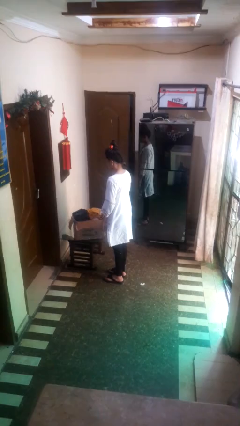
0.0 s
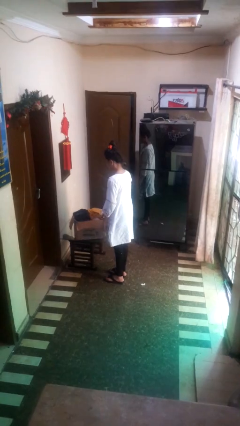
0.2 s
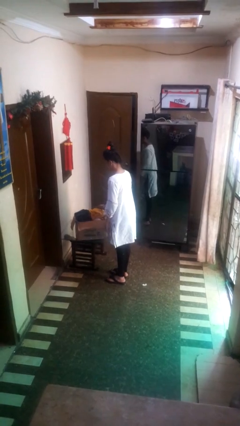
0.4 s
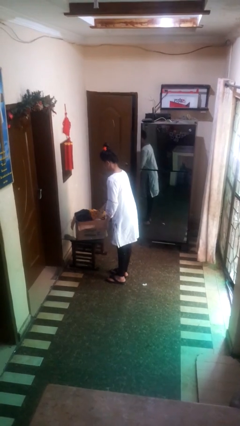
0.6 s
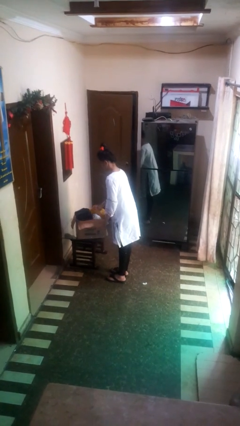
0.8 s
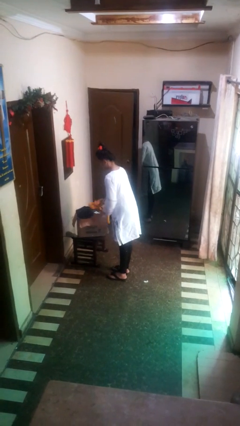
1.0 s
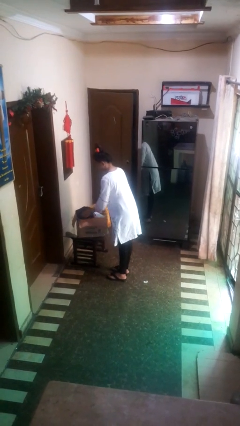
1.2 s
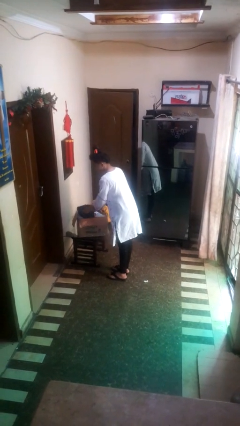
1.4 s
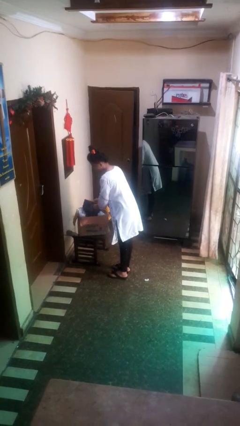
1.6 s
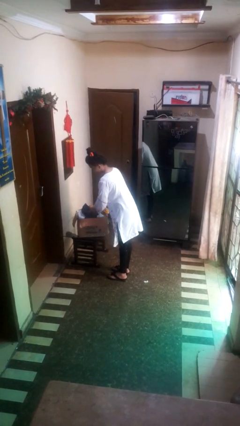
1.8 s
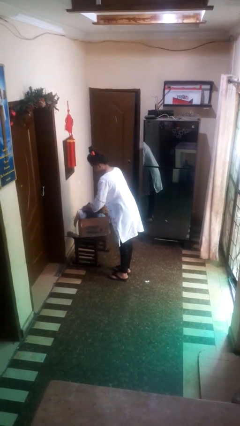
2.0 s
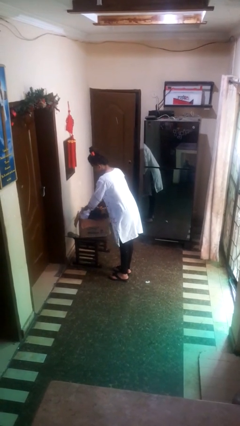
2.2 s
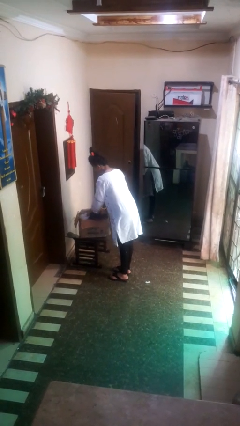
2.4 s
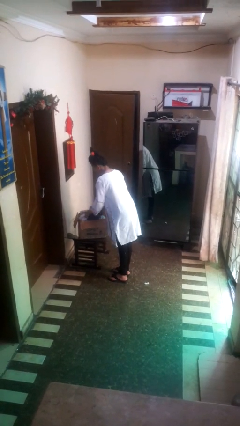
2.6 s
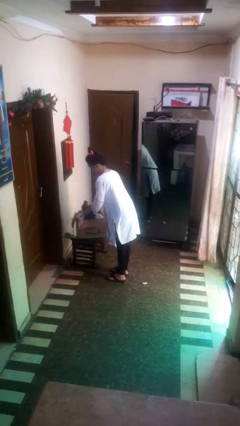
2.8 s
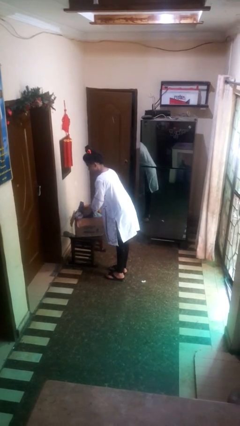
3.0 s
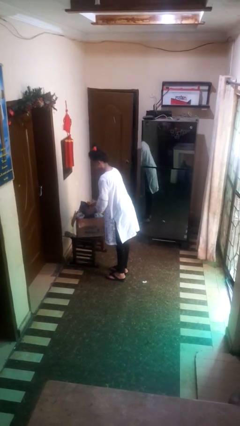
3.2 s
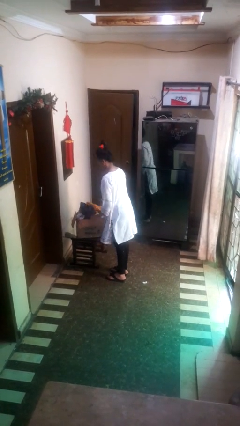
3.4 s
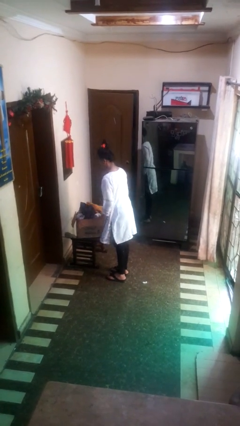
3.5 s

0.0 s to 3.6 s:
person searches in box

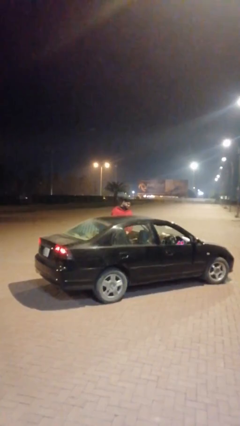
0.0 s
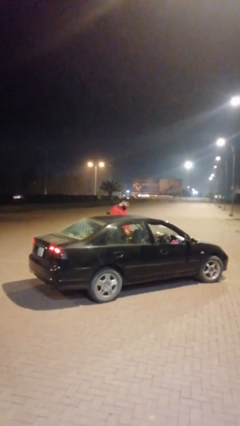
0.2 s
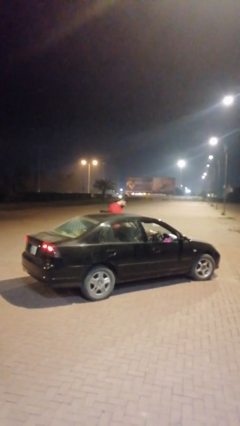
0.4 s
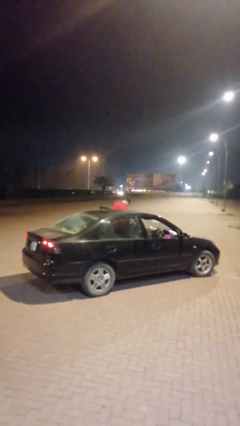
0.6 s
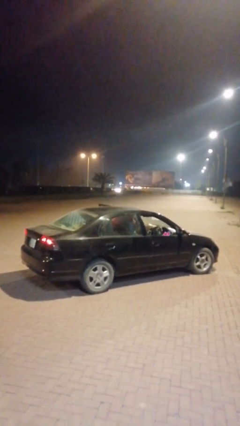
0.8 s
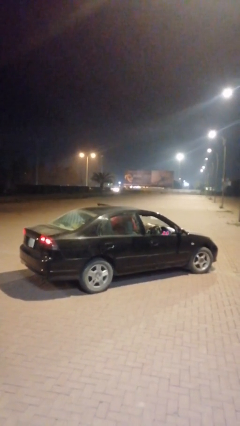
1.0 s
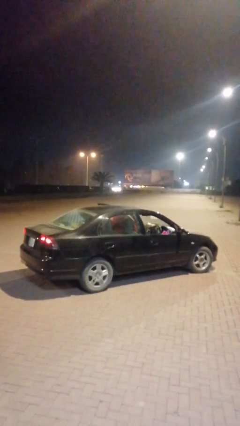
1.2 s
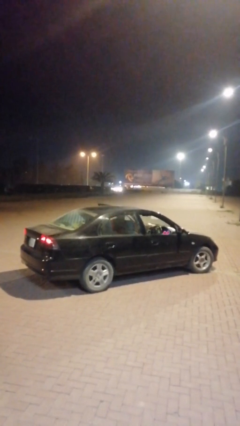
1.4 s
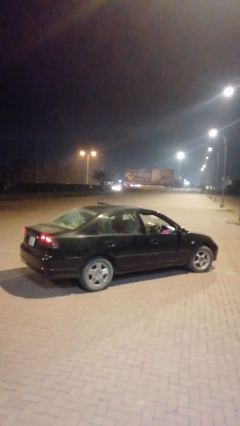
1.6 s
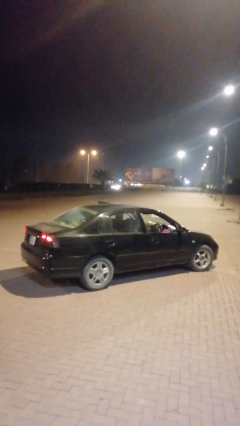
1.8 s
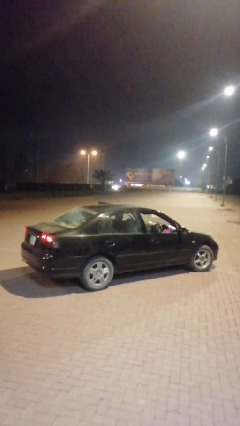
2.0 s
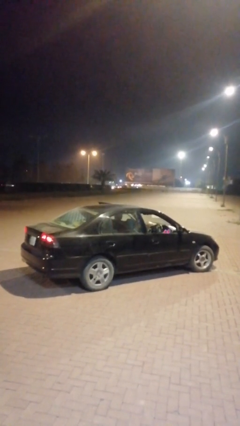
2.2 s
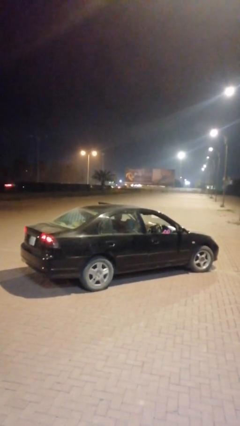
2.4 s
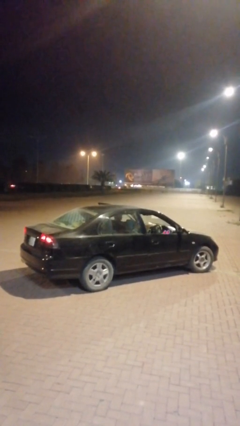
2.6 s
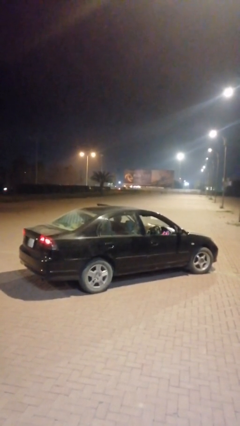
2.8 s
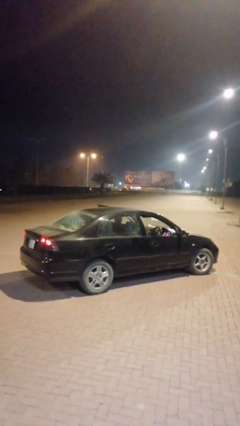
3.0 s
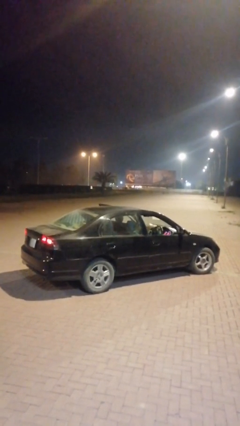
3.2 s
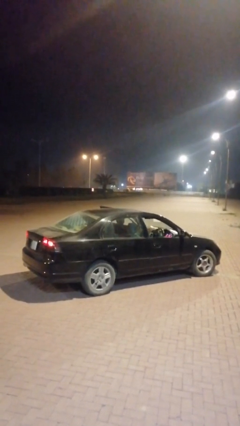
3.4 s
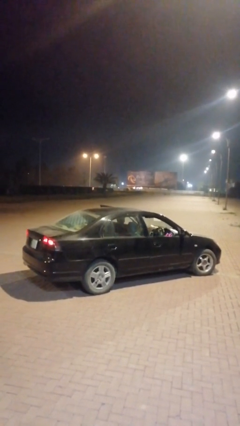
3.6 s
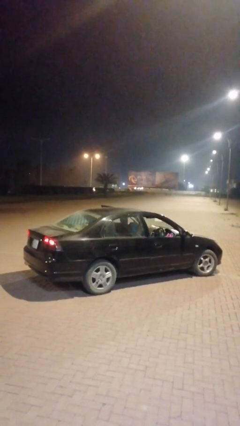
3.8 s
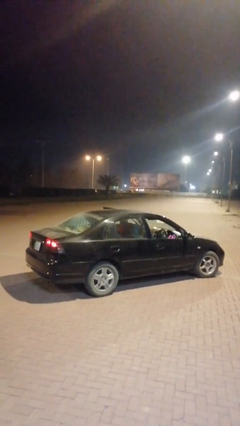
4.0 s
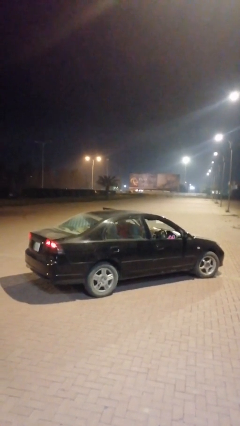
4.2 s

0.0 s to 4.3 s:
person enters car

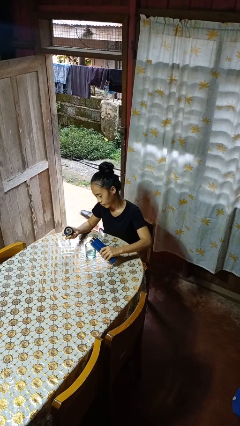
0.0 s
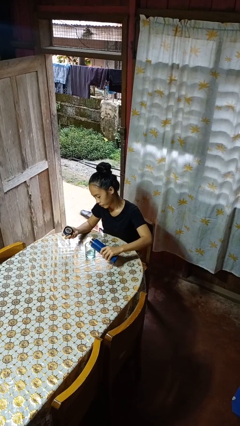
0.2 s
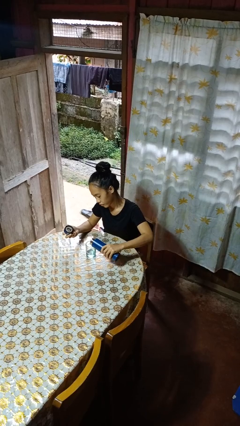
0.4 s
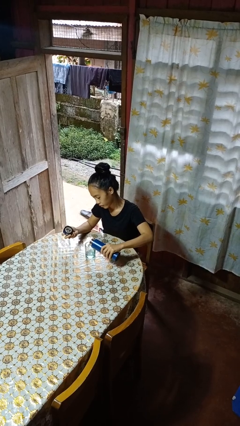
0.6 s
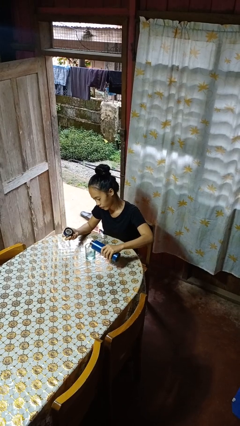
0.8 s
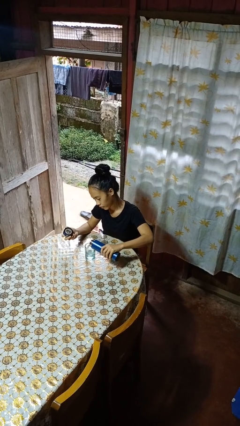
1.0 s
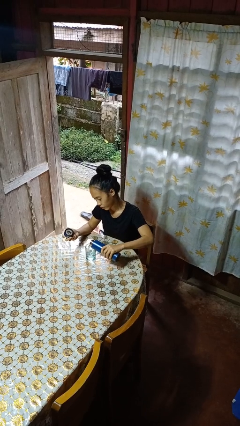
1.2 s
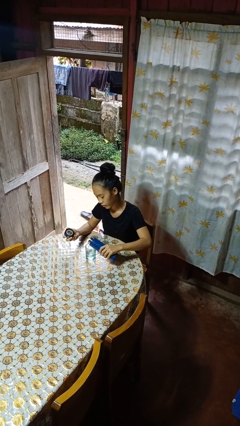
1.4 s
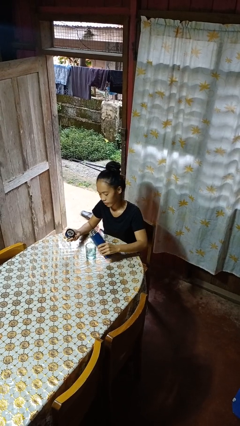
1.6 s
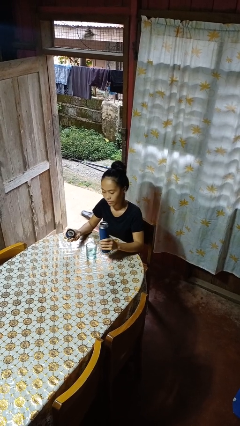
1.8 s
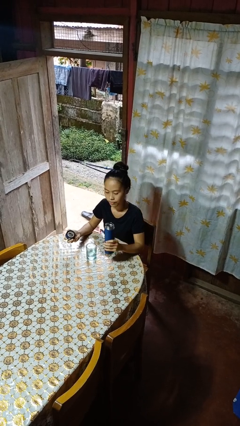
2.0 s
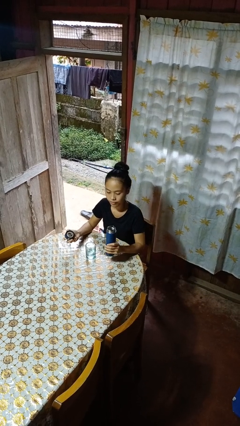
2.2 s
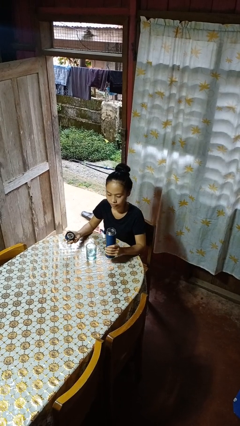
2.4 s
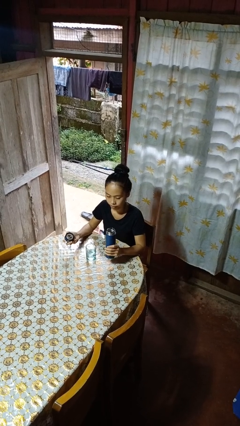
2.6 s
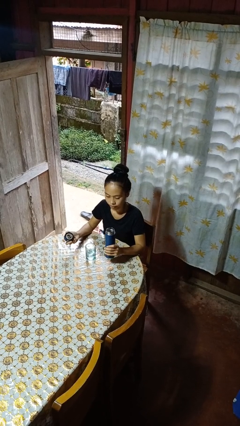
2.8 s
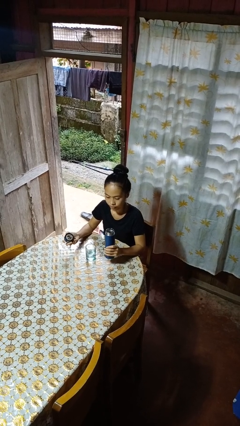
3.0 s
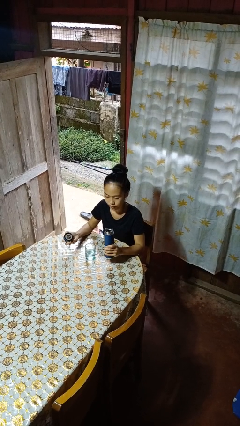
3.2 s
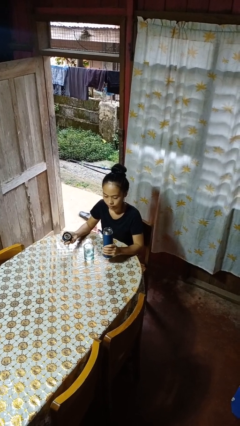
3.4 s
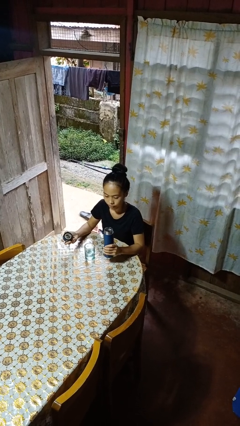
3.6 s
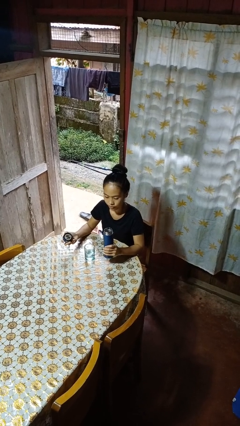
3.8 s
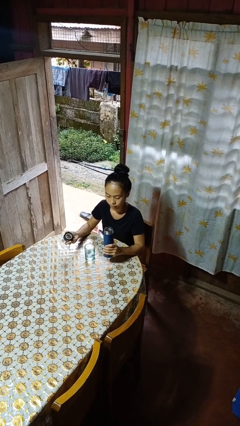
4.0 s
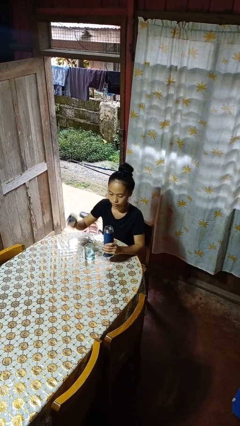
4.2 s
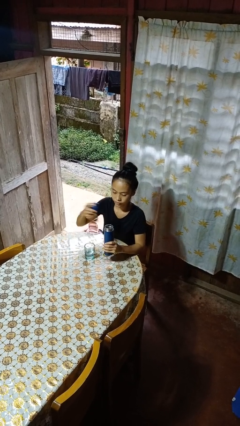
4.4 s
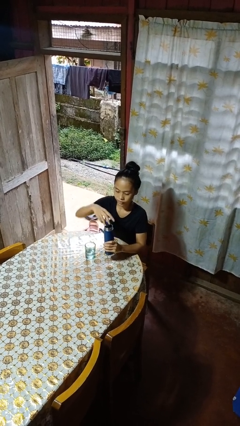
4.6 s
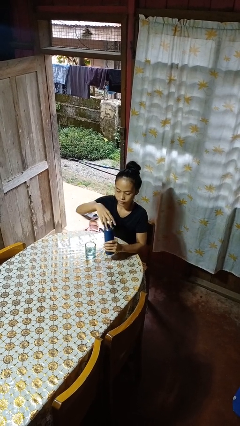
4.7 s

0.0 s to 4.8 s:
person pours liquid into cup

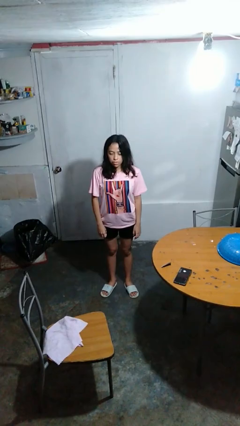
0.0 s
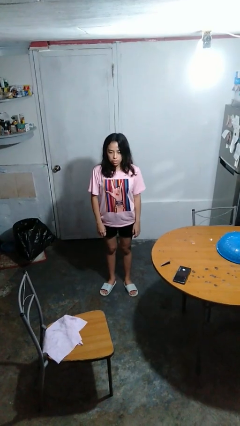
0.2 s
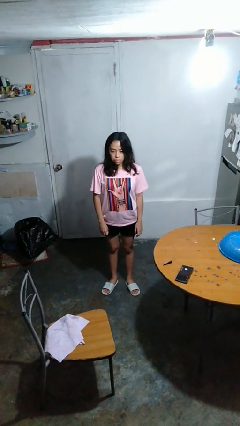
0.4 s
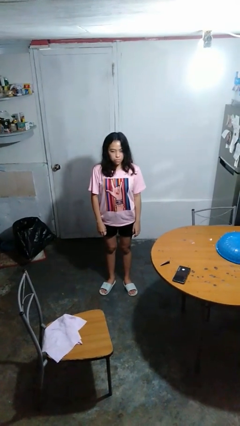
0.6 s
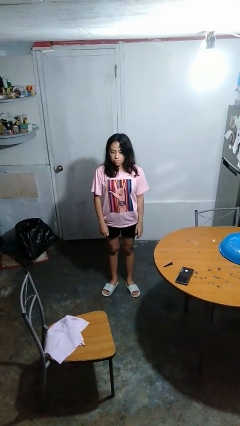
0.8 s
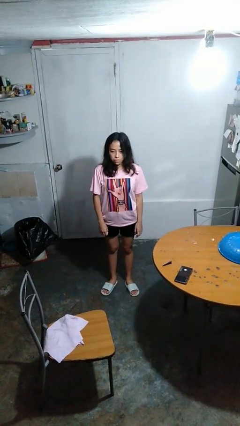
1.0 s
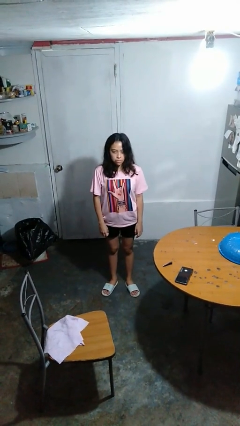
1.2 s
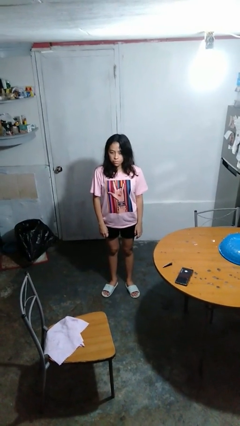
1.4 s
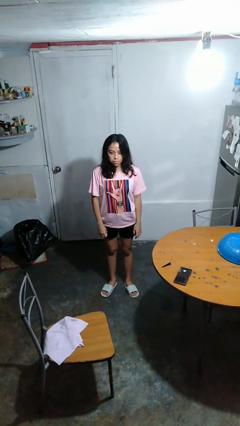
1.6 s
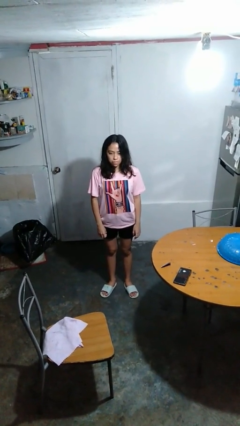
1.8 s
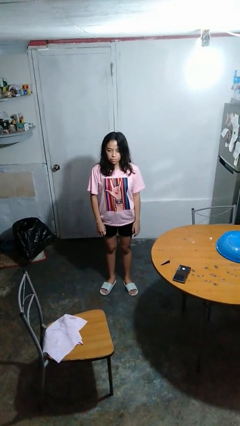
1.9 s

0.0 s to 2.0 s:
person shakes head

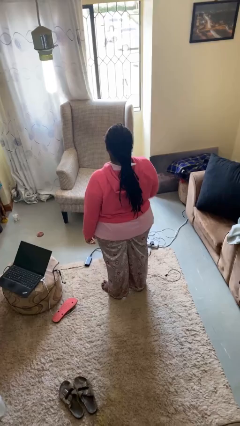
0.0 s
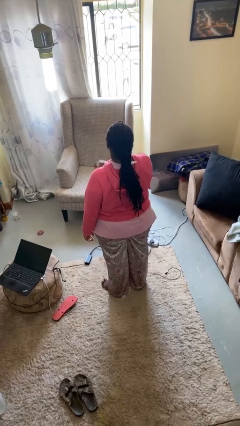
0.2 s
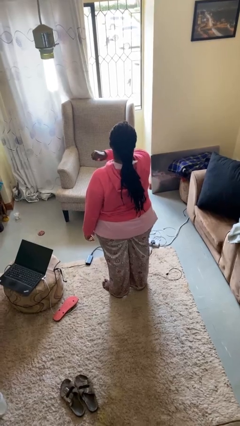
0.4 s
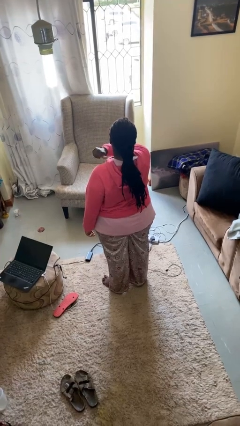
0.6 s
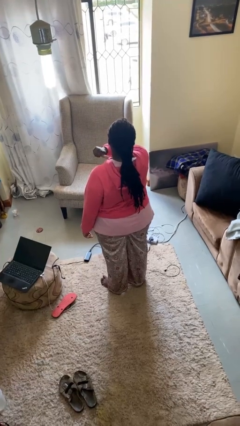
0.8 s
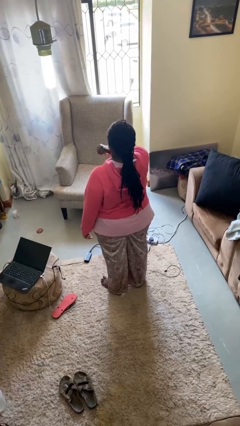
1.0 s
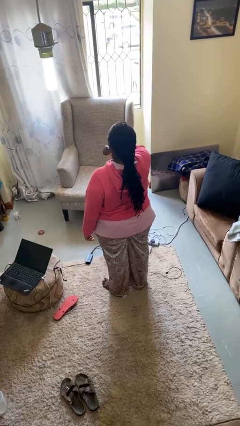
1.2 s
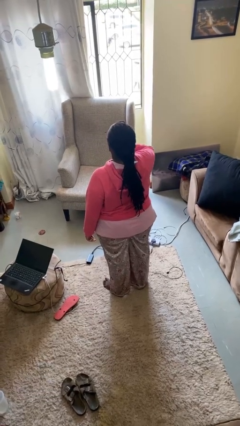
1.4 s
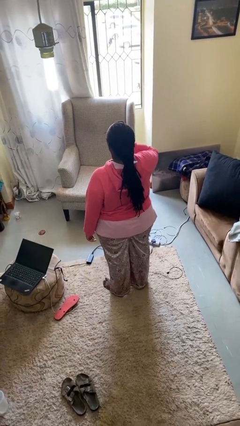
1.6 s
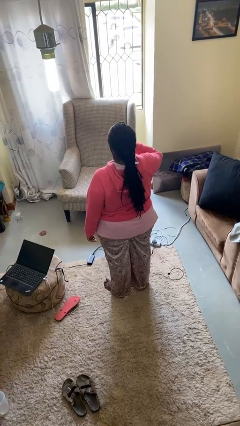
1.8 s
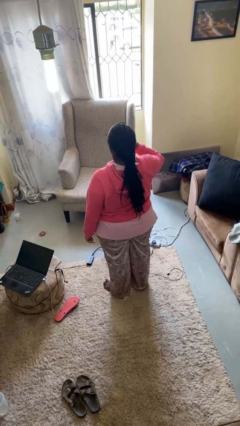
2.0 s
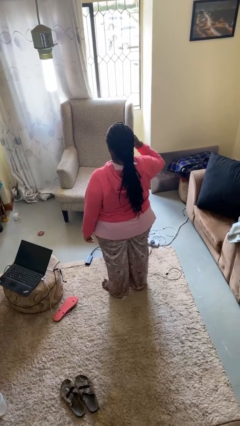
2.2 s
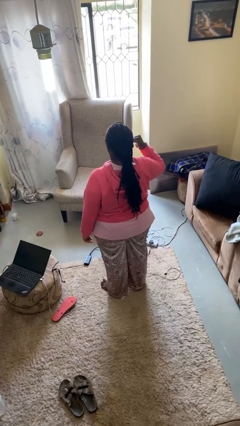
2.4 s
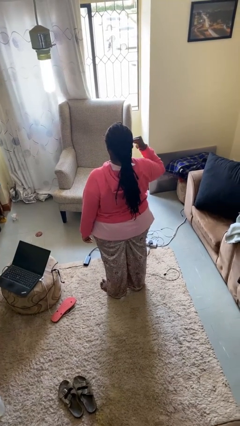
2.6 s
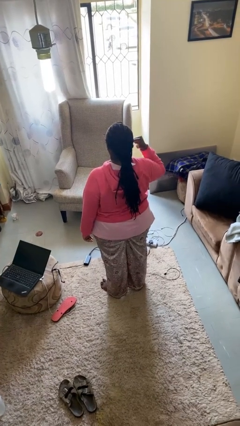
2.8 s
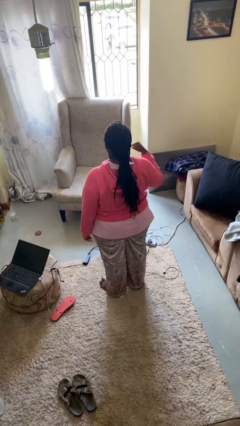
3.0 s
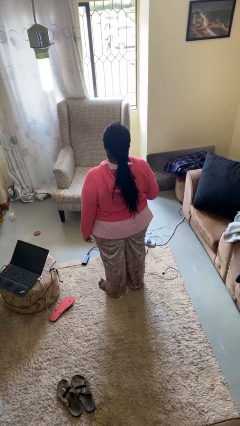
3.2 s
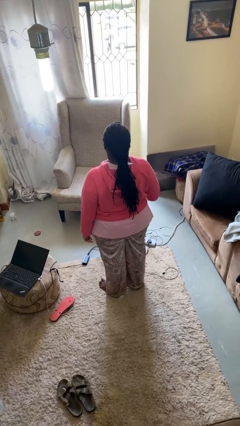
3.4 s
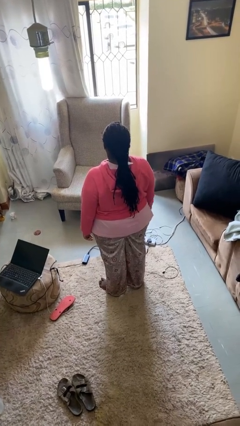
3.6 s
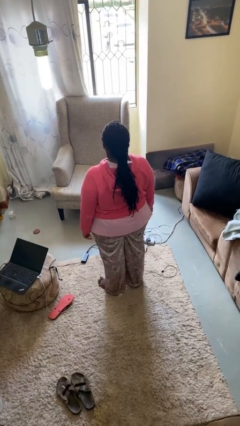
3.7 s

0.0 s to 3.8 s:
person gestures cut
